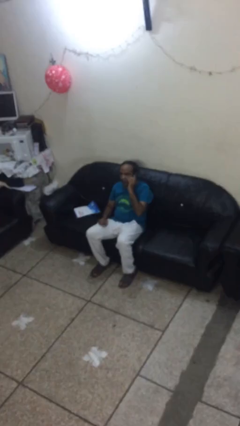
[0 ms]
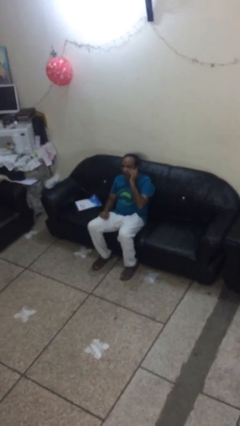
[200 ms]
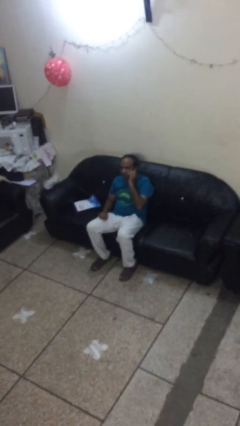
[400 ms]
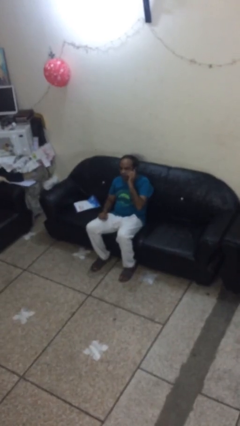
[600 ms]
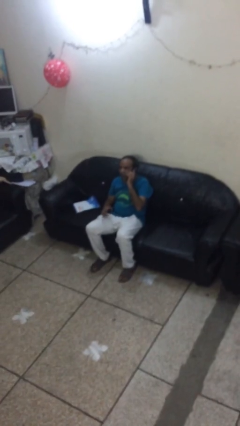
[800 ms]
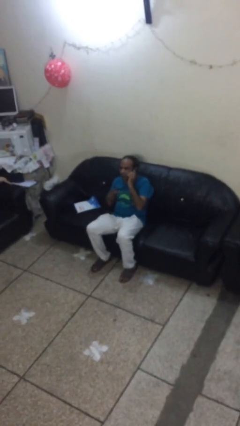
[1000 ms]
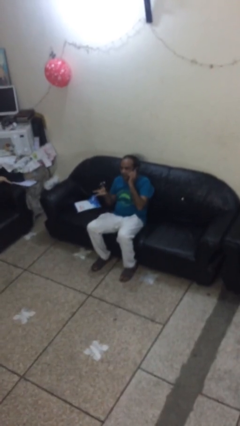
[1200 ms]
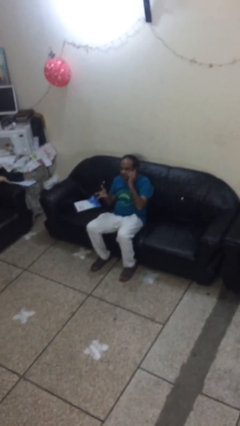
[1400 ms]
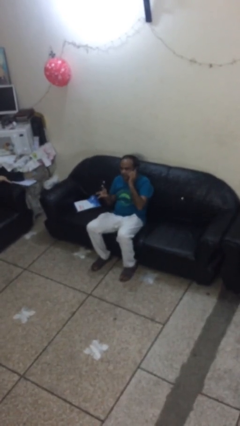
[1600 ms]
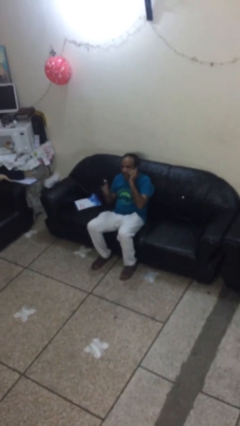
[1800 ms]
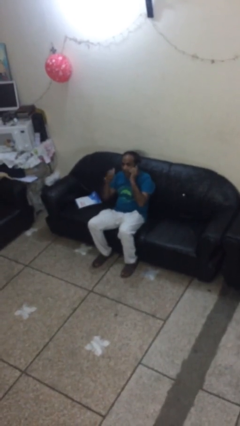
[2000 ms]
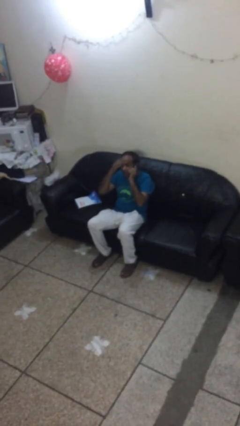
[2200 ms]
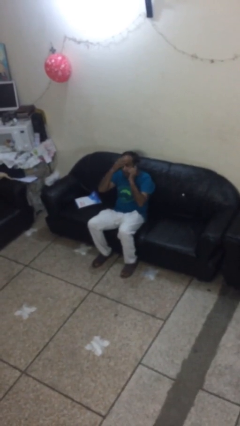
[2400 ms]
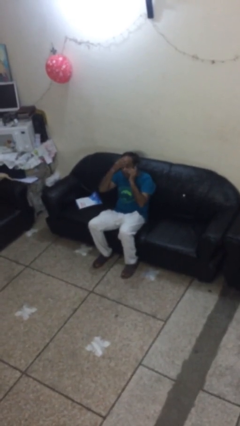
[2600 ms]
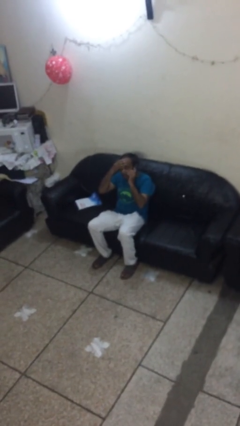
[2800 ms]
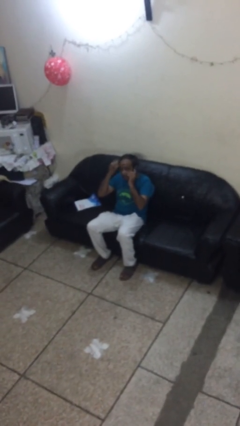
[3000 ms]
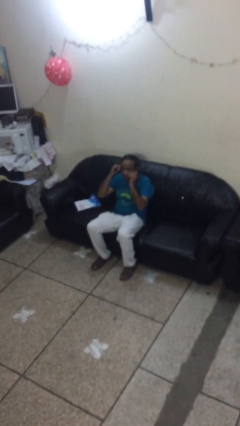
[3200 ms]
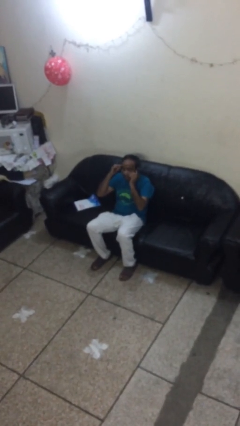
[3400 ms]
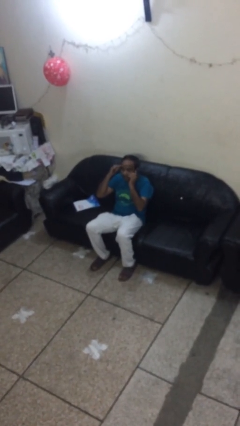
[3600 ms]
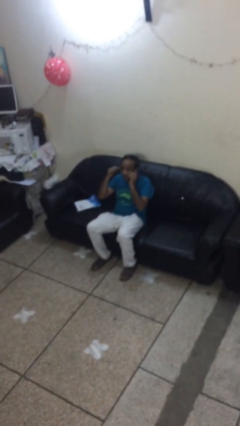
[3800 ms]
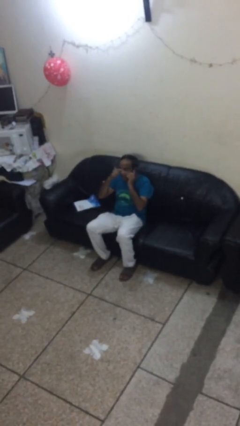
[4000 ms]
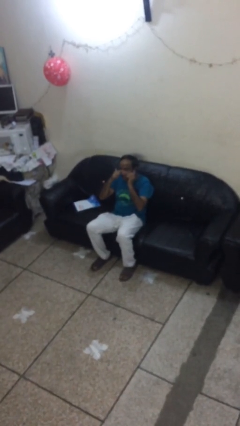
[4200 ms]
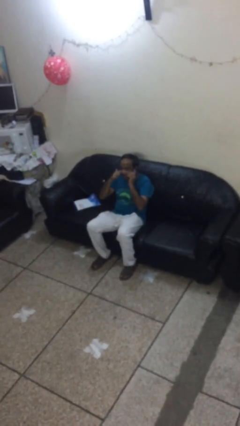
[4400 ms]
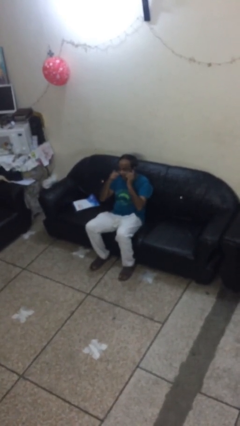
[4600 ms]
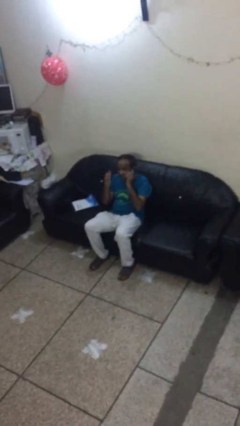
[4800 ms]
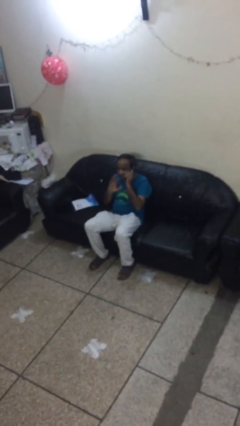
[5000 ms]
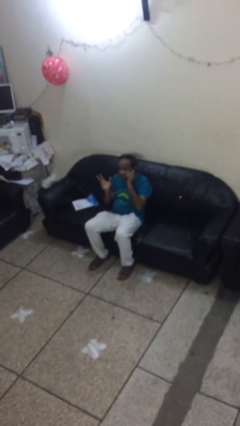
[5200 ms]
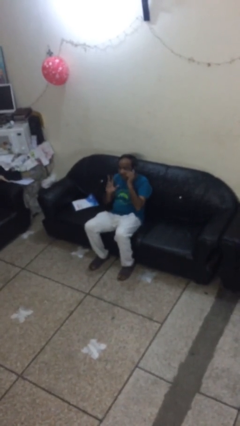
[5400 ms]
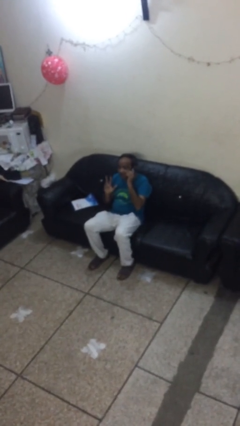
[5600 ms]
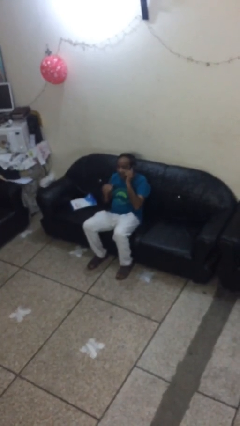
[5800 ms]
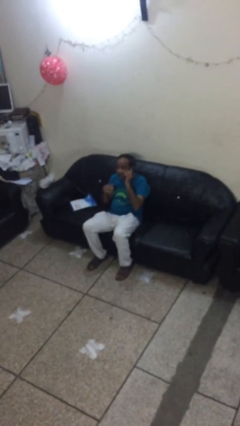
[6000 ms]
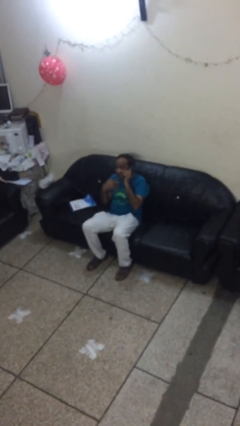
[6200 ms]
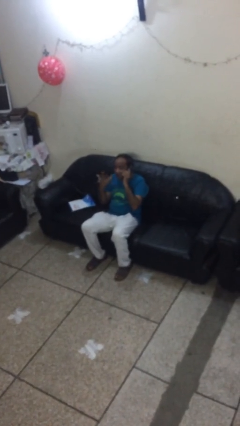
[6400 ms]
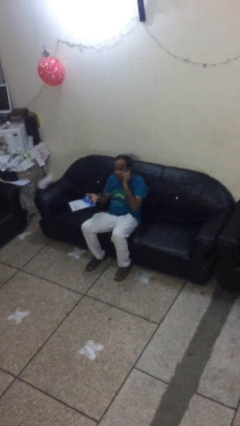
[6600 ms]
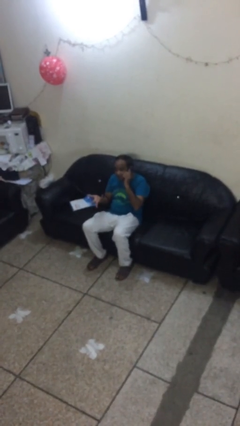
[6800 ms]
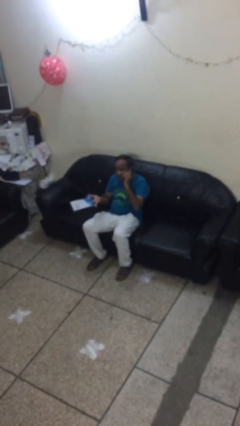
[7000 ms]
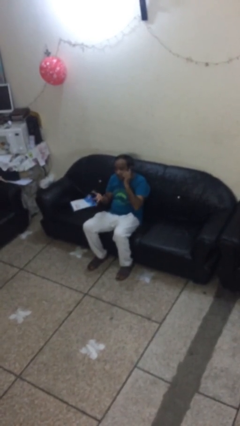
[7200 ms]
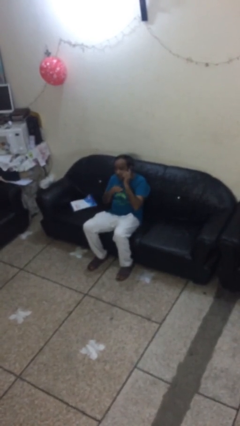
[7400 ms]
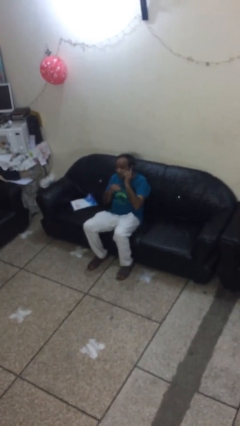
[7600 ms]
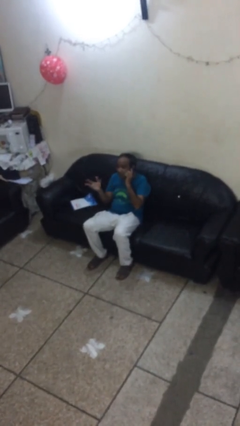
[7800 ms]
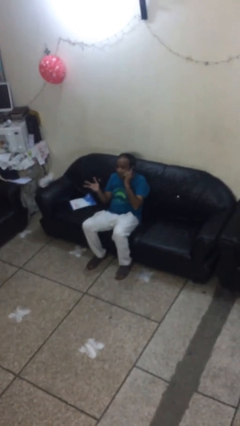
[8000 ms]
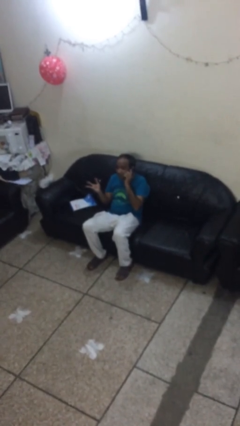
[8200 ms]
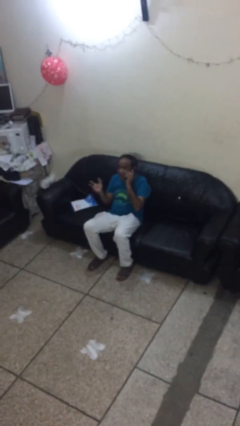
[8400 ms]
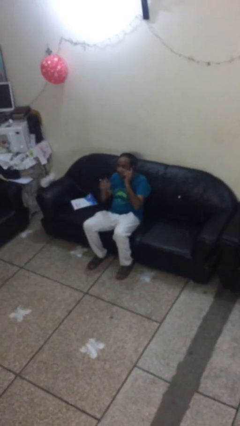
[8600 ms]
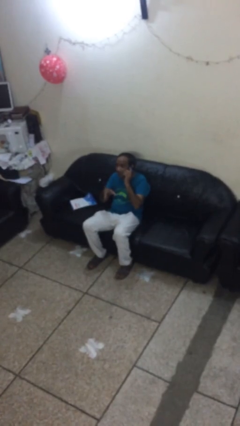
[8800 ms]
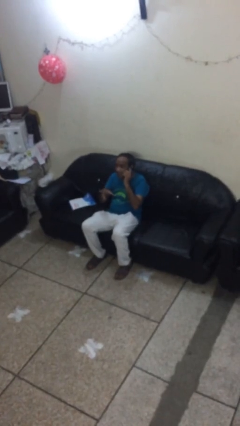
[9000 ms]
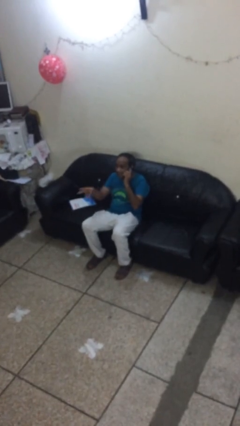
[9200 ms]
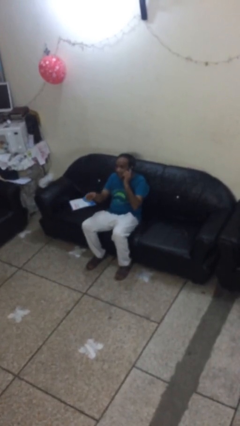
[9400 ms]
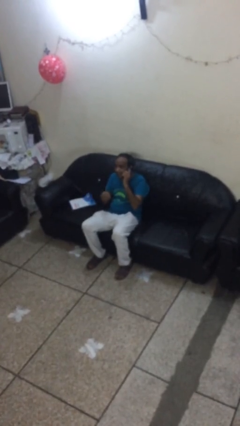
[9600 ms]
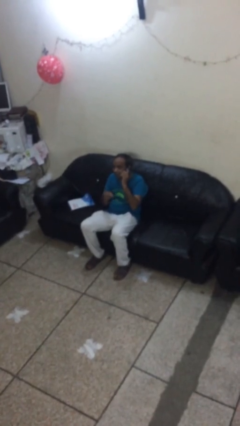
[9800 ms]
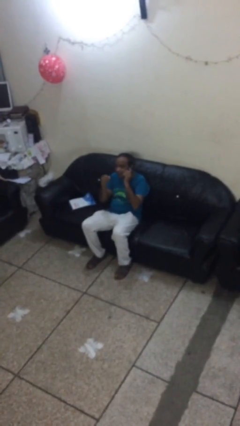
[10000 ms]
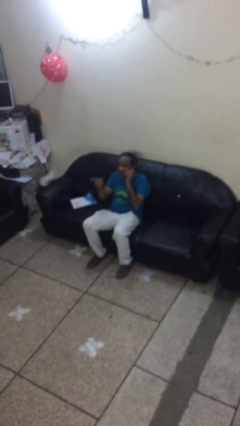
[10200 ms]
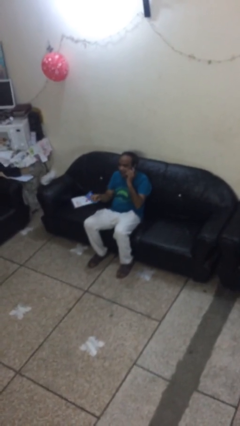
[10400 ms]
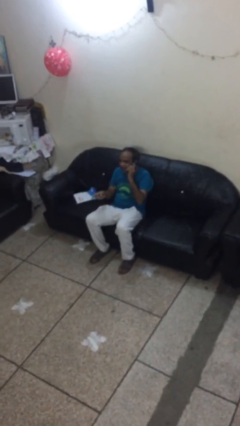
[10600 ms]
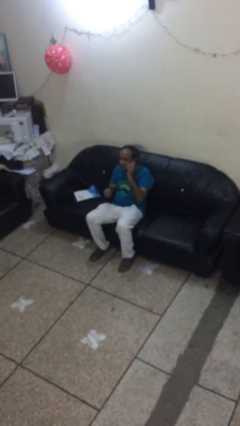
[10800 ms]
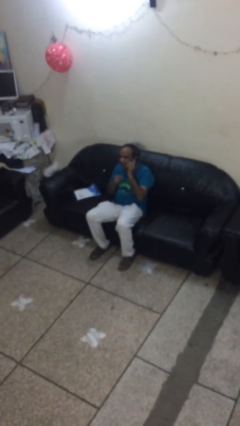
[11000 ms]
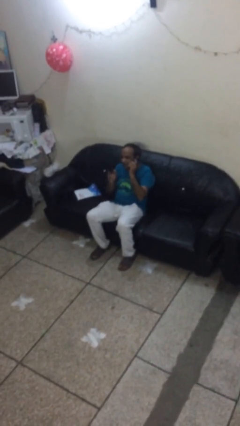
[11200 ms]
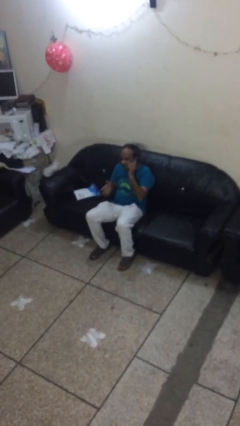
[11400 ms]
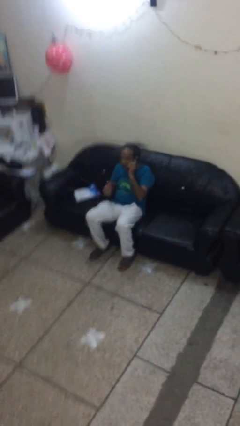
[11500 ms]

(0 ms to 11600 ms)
person talks on phone

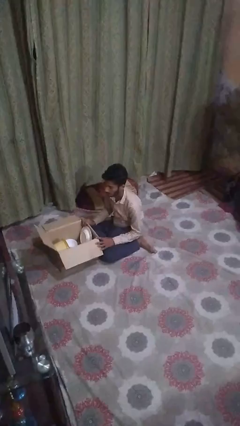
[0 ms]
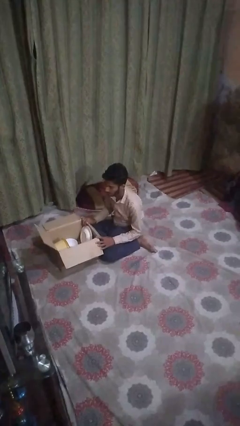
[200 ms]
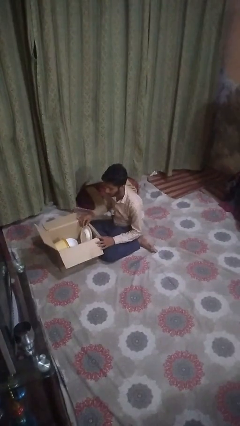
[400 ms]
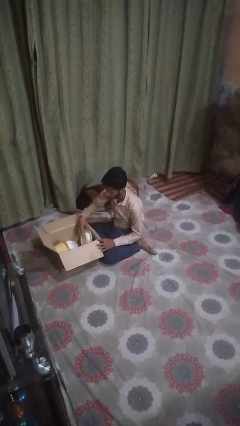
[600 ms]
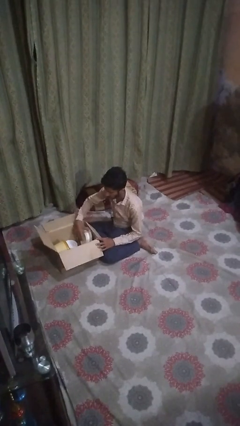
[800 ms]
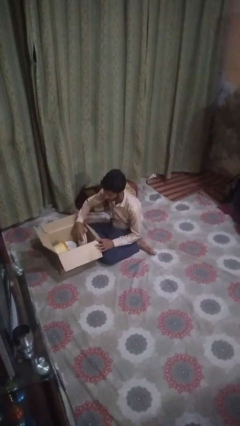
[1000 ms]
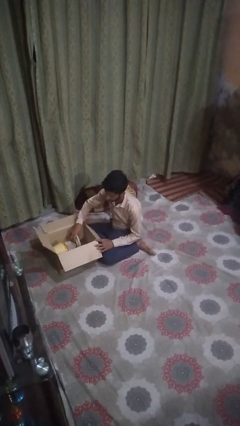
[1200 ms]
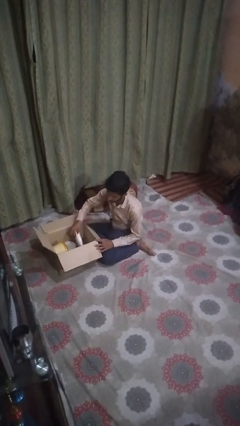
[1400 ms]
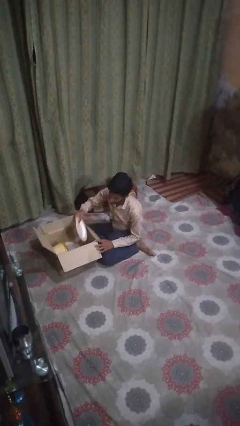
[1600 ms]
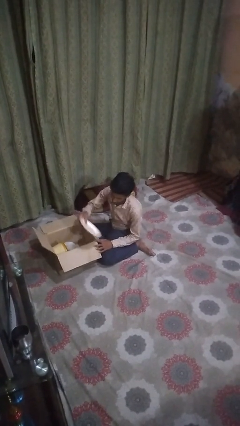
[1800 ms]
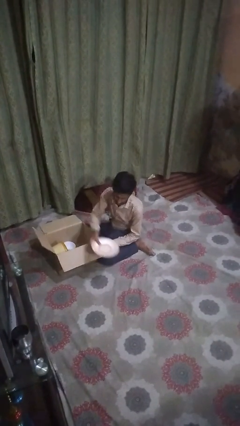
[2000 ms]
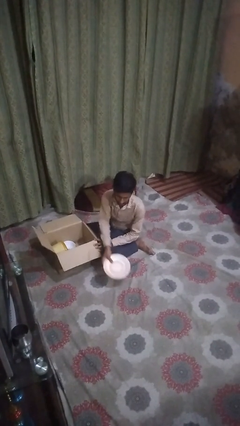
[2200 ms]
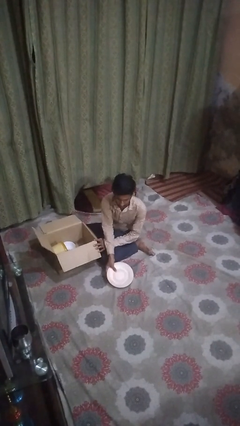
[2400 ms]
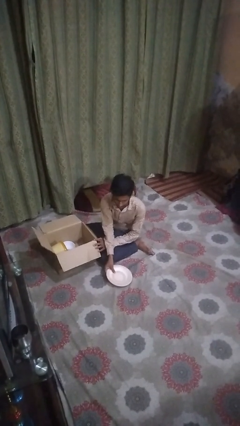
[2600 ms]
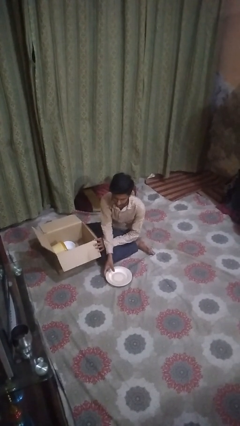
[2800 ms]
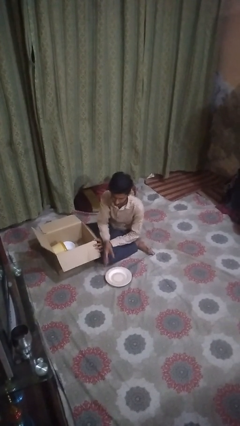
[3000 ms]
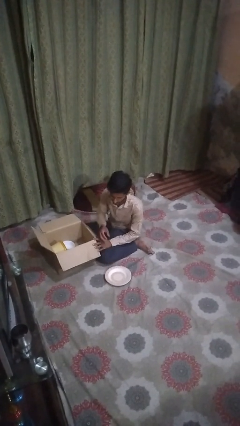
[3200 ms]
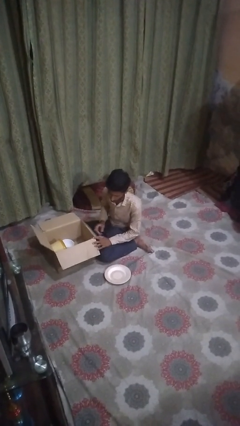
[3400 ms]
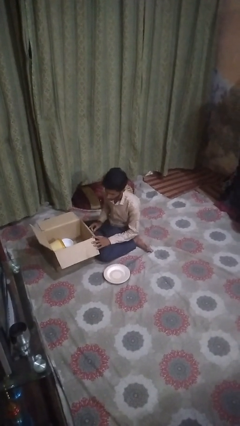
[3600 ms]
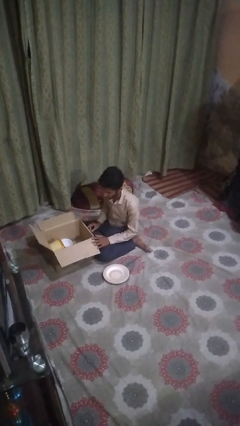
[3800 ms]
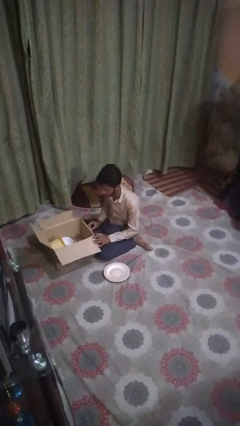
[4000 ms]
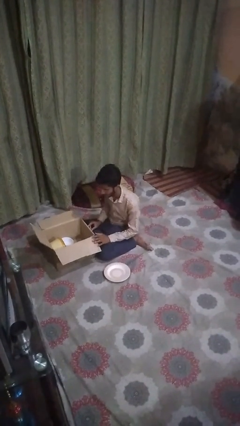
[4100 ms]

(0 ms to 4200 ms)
person takes object from box

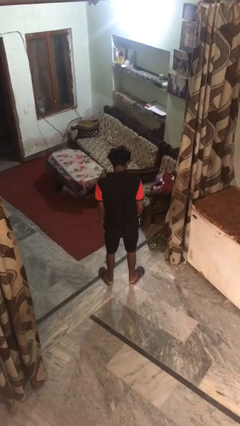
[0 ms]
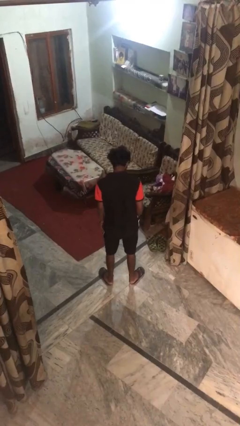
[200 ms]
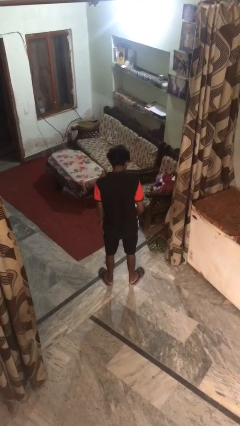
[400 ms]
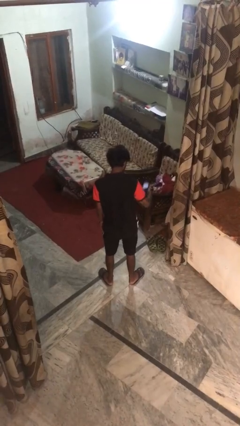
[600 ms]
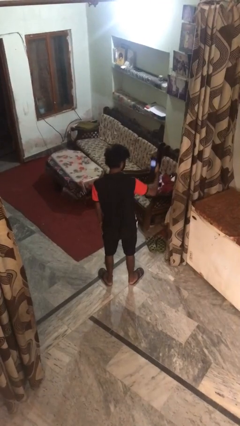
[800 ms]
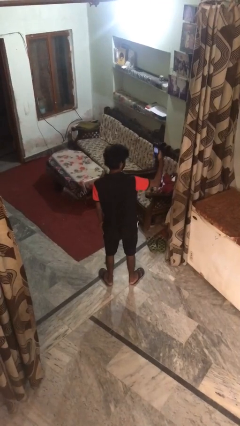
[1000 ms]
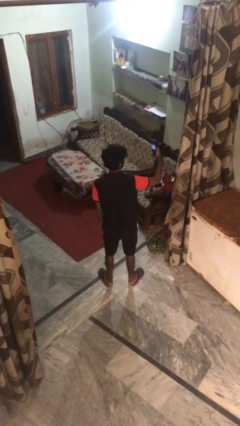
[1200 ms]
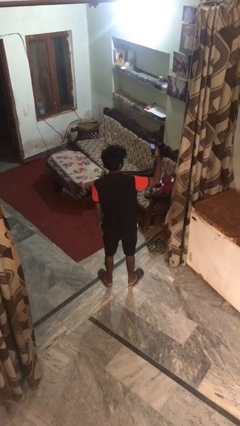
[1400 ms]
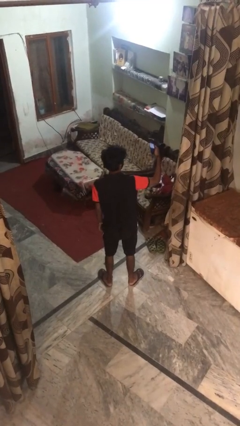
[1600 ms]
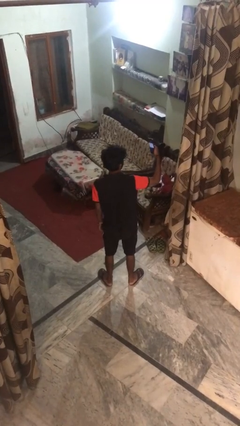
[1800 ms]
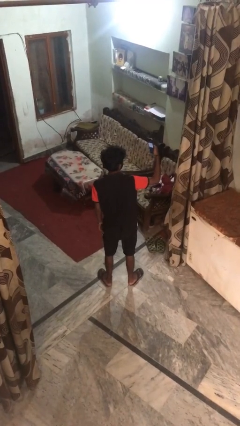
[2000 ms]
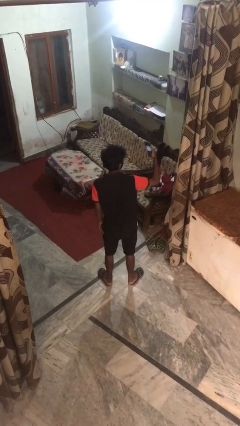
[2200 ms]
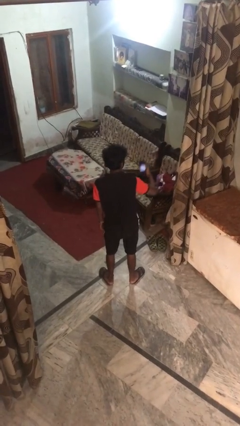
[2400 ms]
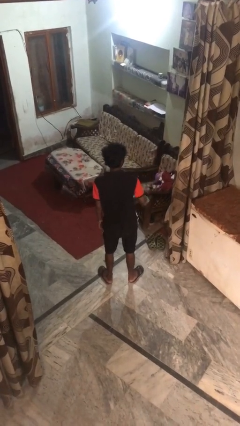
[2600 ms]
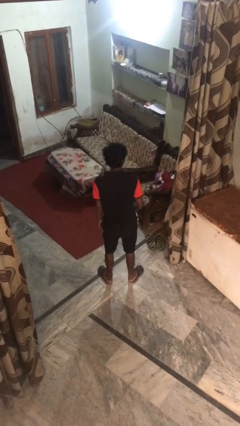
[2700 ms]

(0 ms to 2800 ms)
person takes selfie
